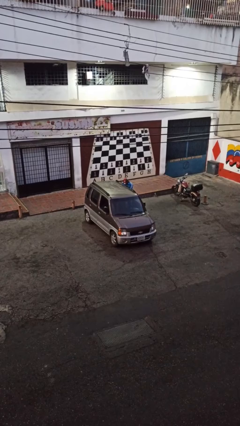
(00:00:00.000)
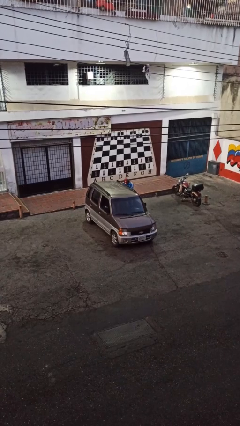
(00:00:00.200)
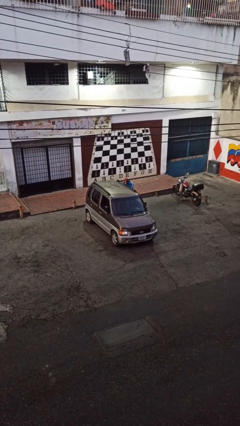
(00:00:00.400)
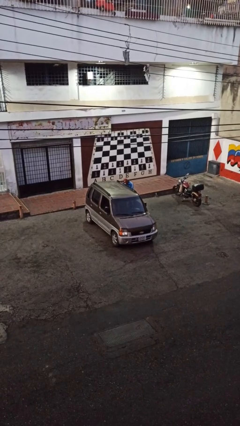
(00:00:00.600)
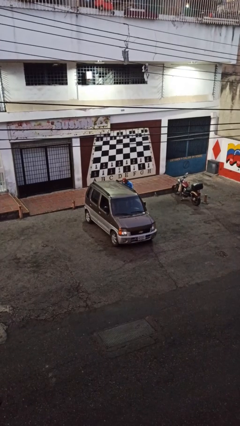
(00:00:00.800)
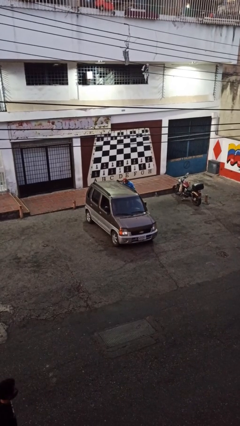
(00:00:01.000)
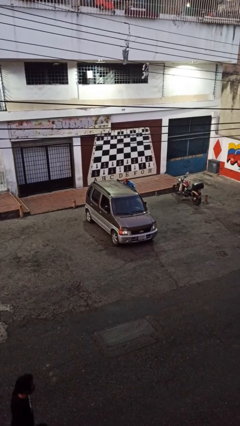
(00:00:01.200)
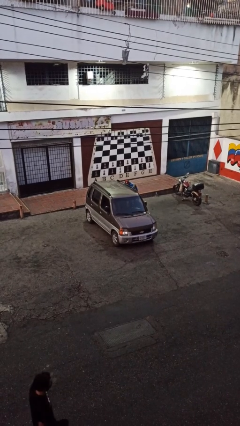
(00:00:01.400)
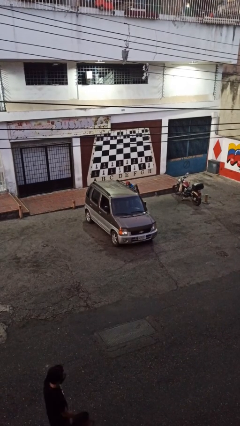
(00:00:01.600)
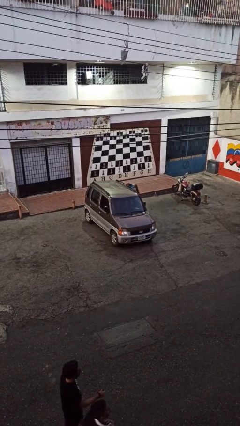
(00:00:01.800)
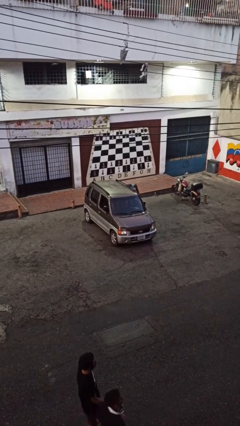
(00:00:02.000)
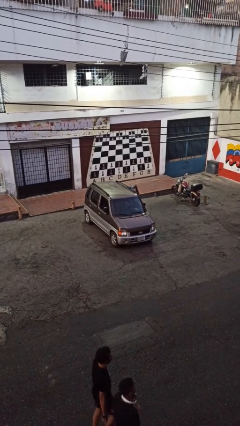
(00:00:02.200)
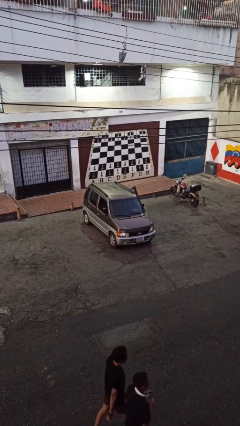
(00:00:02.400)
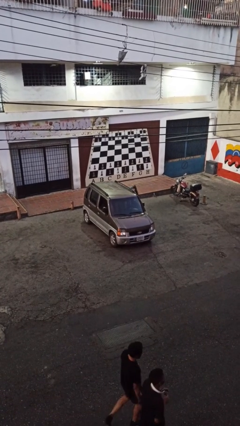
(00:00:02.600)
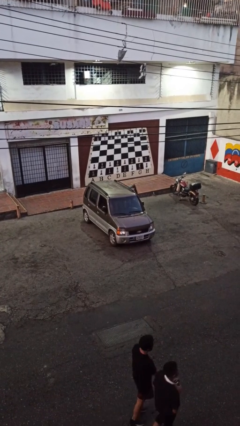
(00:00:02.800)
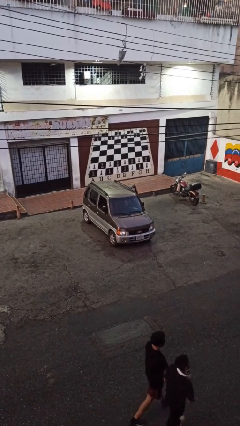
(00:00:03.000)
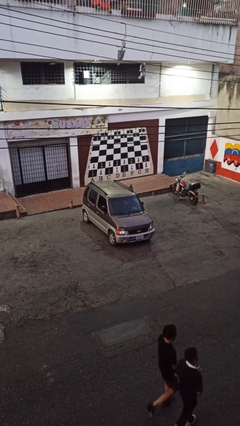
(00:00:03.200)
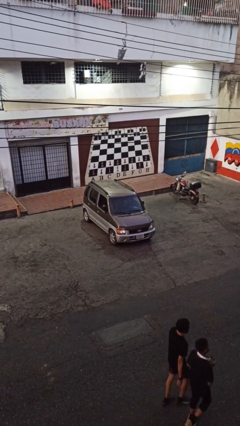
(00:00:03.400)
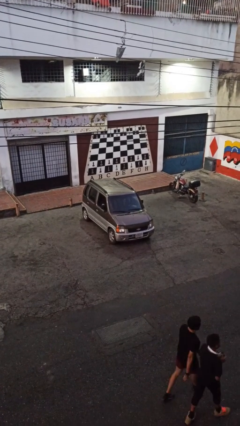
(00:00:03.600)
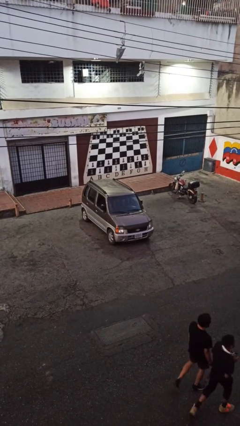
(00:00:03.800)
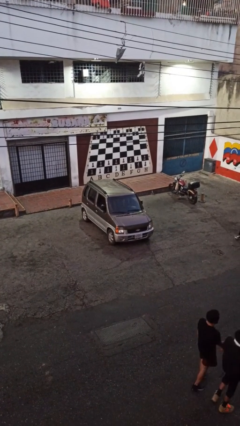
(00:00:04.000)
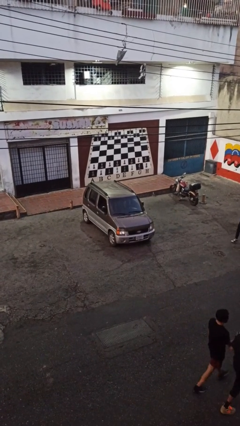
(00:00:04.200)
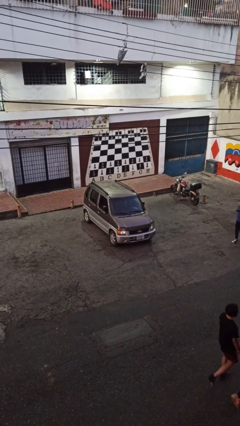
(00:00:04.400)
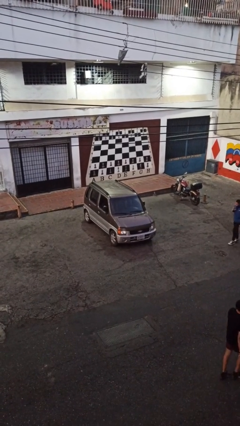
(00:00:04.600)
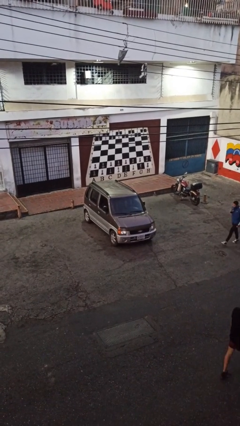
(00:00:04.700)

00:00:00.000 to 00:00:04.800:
car picks up person

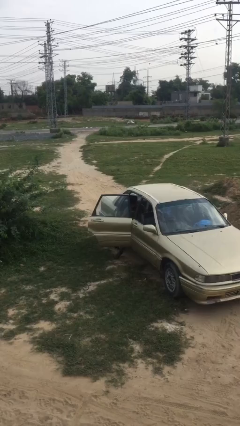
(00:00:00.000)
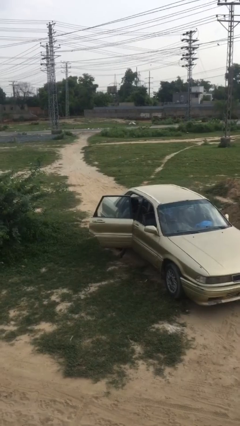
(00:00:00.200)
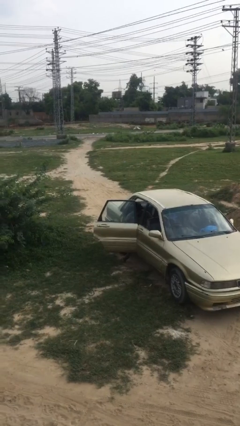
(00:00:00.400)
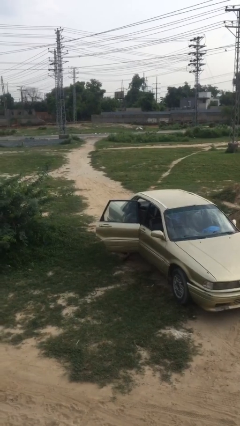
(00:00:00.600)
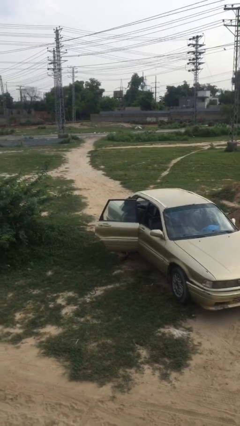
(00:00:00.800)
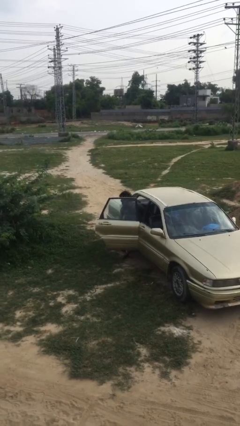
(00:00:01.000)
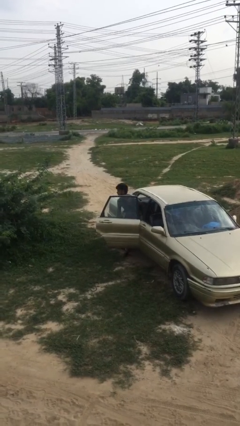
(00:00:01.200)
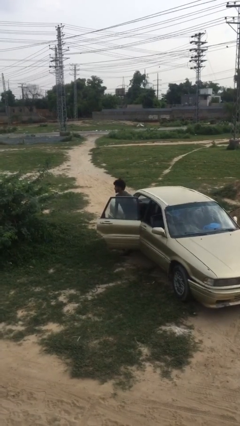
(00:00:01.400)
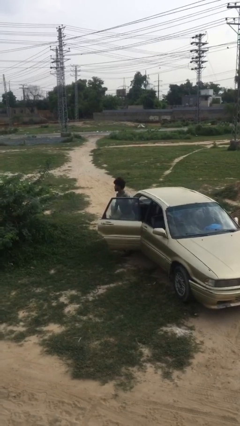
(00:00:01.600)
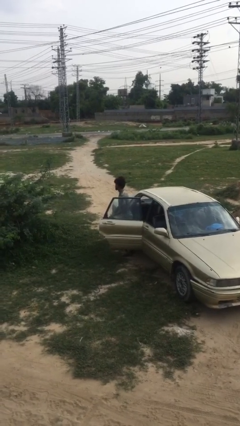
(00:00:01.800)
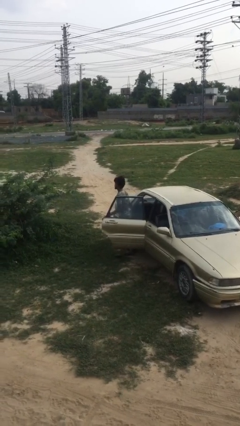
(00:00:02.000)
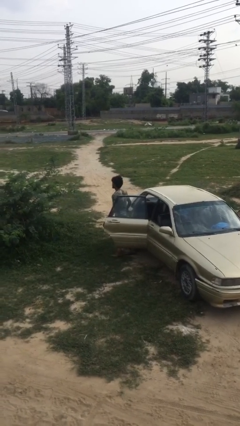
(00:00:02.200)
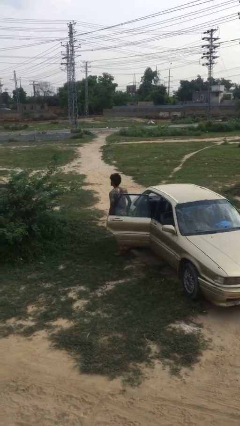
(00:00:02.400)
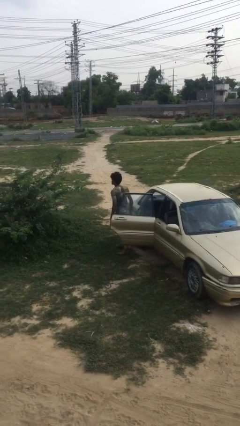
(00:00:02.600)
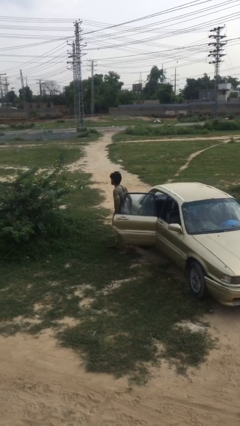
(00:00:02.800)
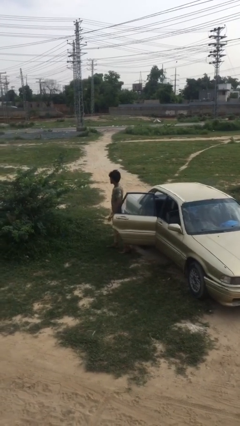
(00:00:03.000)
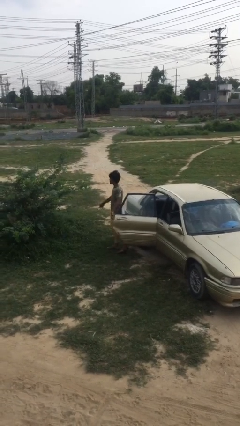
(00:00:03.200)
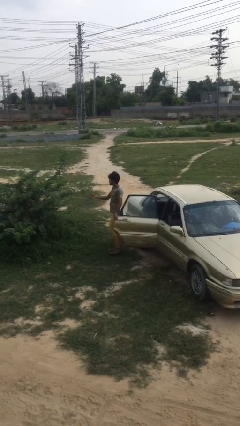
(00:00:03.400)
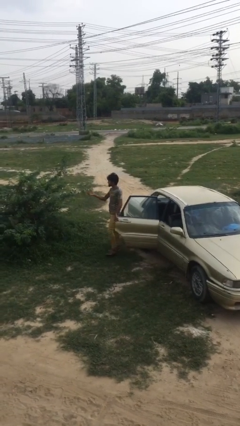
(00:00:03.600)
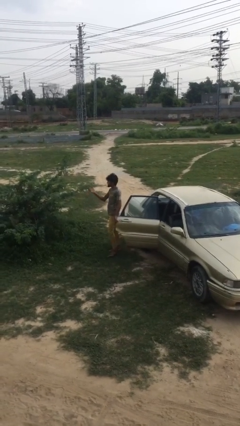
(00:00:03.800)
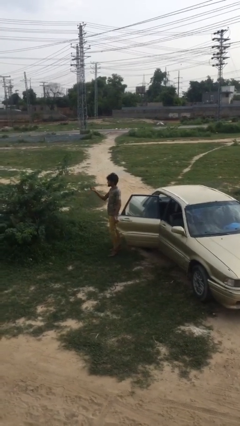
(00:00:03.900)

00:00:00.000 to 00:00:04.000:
person exits car

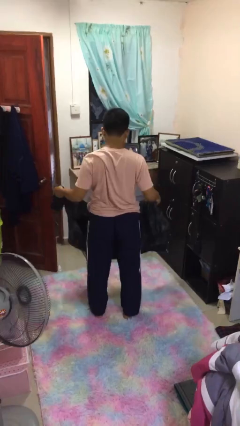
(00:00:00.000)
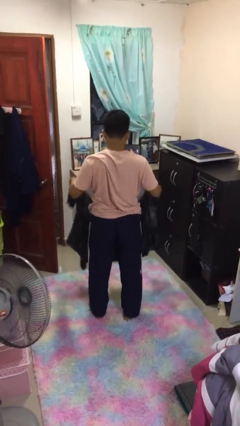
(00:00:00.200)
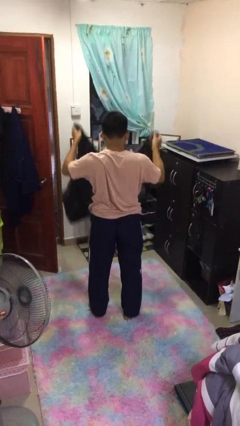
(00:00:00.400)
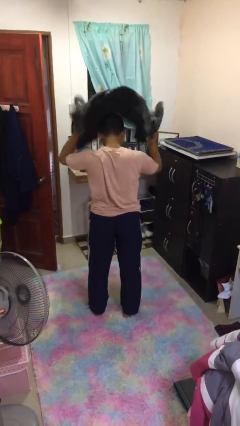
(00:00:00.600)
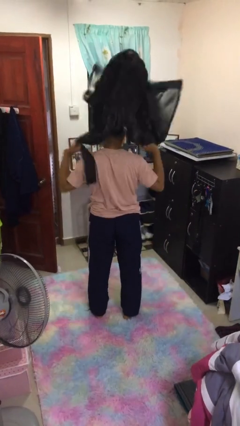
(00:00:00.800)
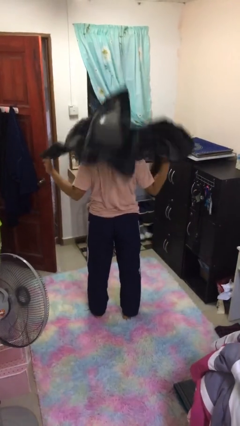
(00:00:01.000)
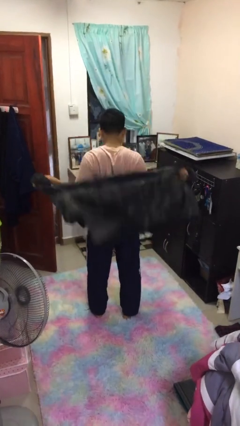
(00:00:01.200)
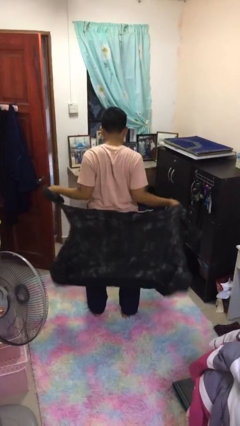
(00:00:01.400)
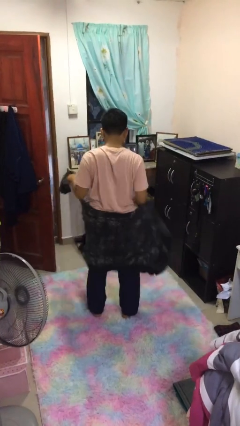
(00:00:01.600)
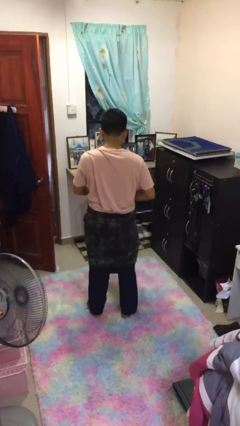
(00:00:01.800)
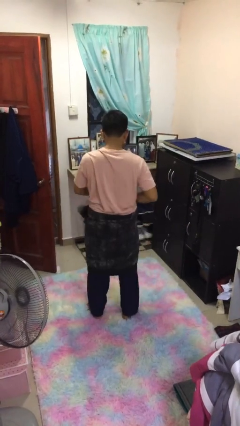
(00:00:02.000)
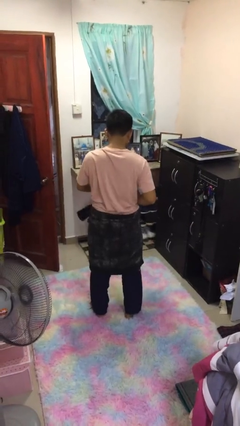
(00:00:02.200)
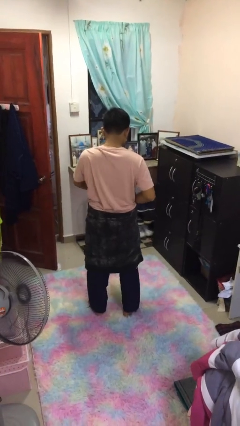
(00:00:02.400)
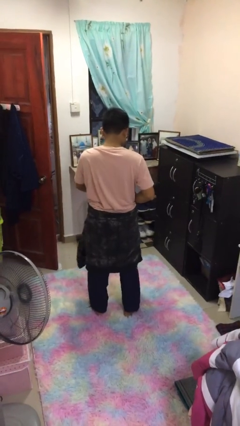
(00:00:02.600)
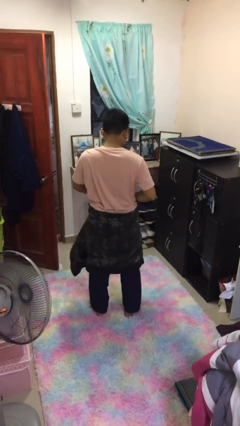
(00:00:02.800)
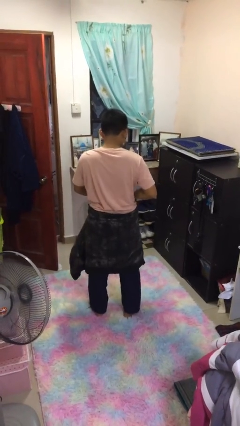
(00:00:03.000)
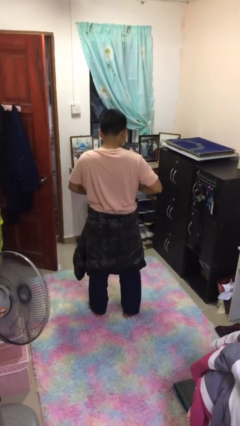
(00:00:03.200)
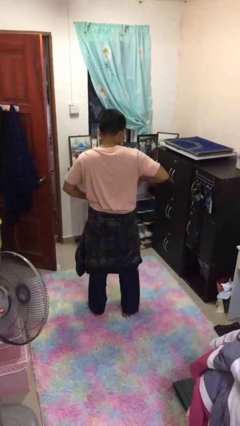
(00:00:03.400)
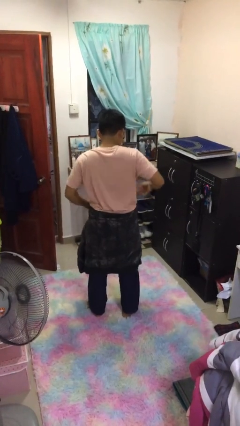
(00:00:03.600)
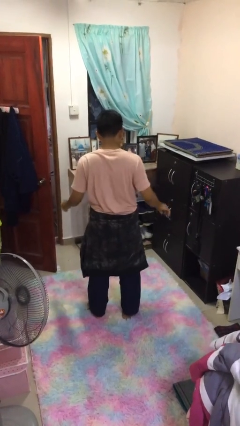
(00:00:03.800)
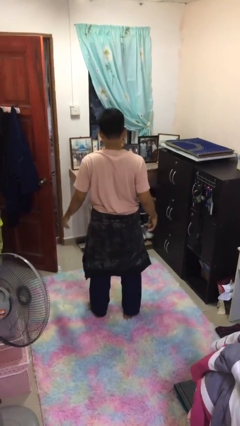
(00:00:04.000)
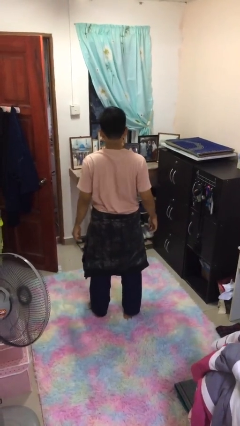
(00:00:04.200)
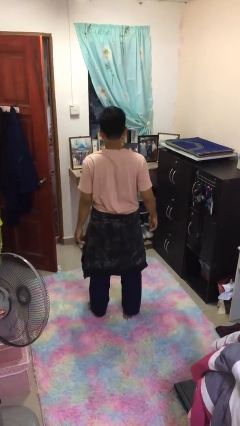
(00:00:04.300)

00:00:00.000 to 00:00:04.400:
person ties jacket around waist

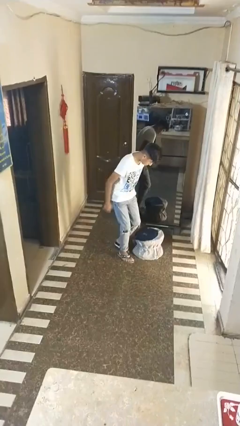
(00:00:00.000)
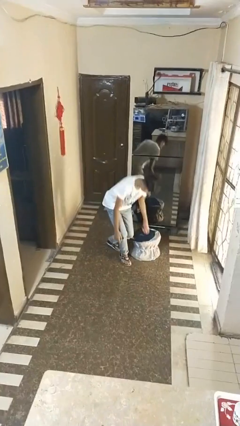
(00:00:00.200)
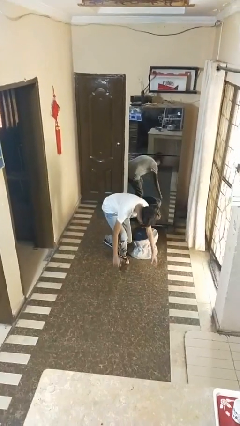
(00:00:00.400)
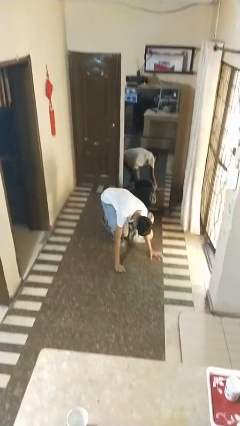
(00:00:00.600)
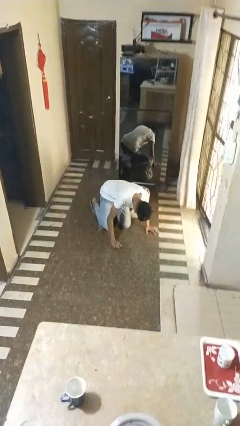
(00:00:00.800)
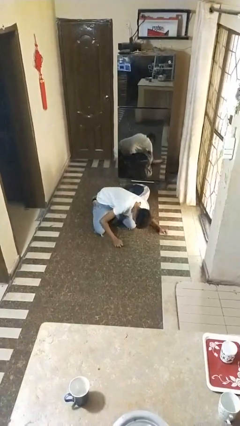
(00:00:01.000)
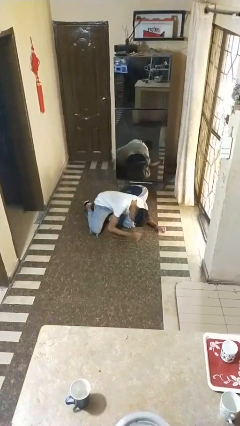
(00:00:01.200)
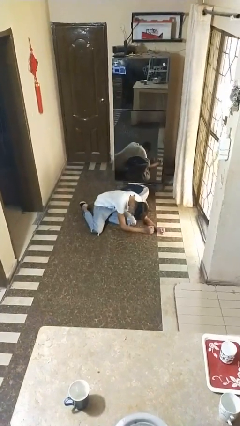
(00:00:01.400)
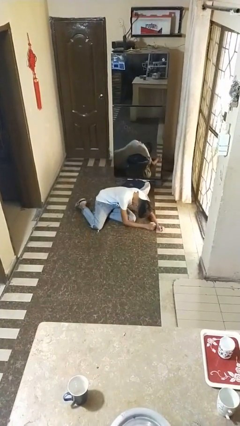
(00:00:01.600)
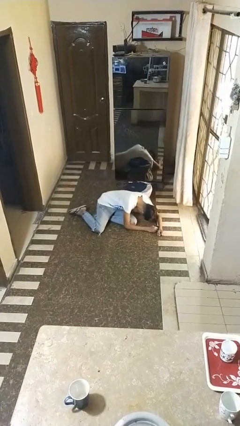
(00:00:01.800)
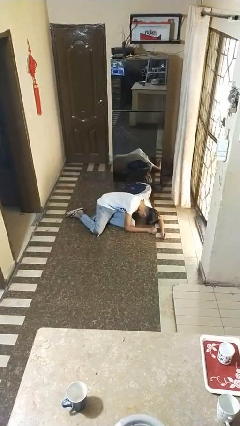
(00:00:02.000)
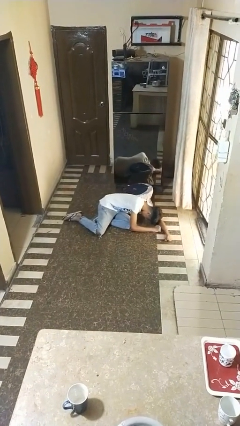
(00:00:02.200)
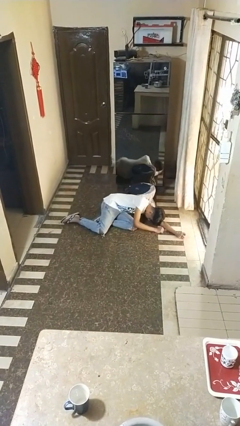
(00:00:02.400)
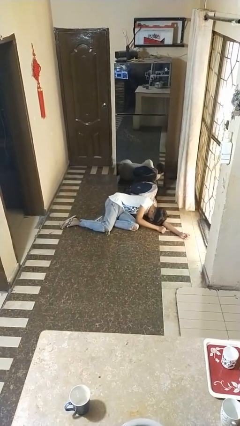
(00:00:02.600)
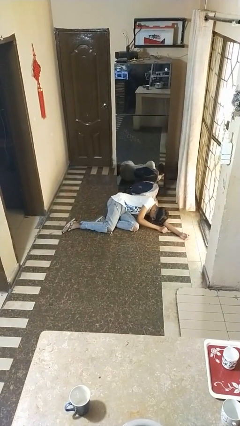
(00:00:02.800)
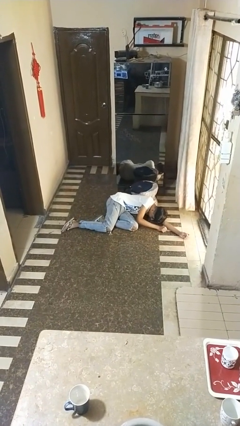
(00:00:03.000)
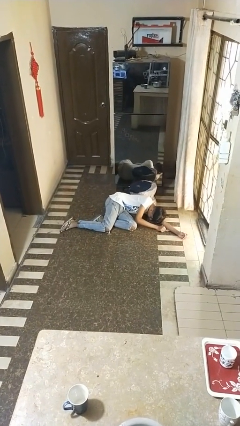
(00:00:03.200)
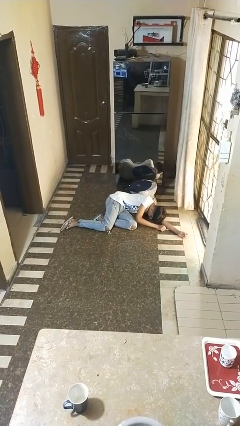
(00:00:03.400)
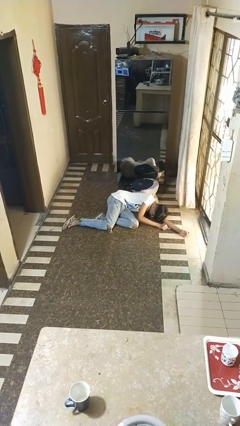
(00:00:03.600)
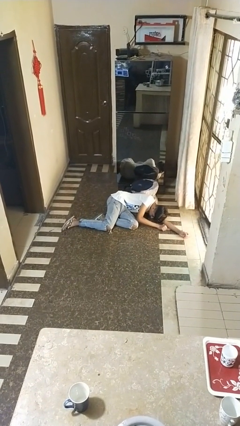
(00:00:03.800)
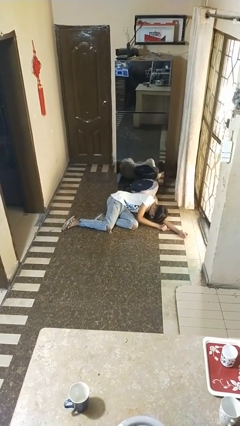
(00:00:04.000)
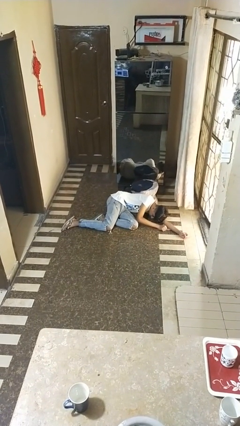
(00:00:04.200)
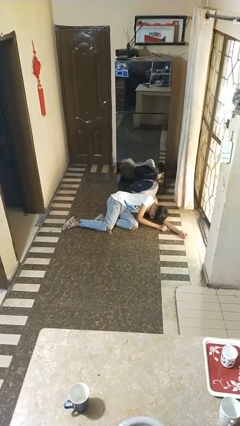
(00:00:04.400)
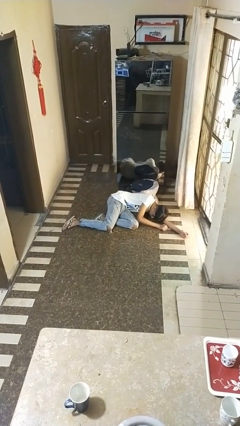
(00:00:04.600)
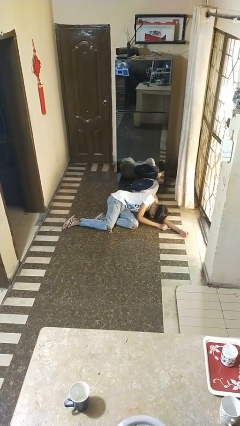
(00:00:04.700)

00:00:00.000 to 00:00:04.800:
person lies down on floor
